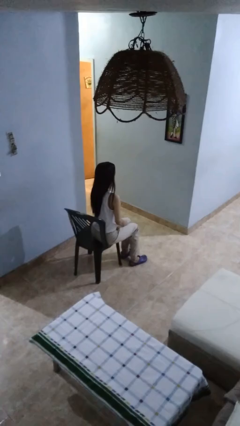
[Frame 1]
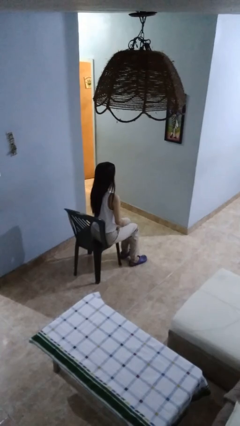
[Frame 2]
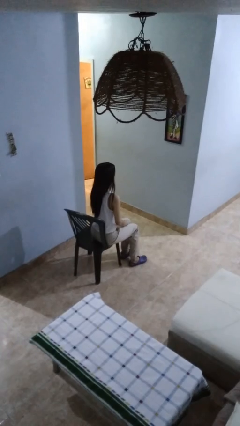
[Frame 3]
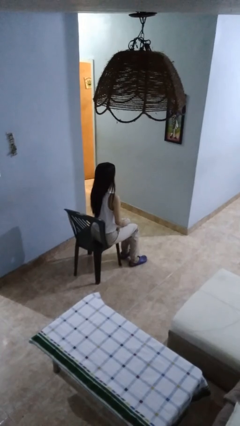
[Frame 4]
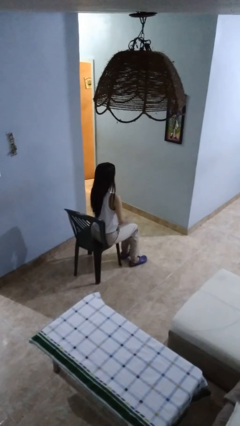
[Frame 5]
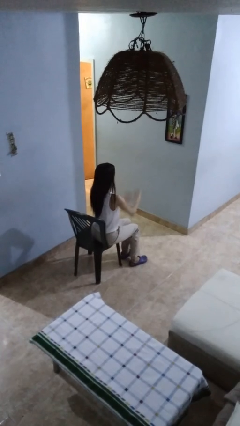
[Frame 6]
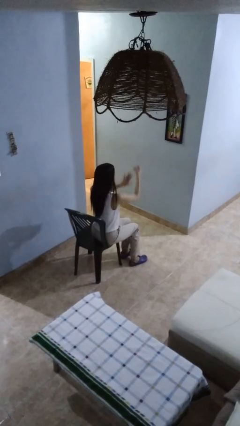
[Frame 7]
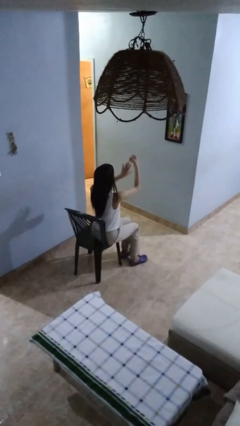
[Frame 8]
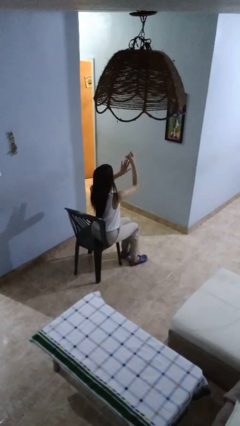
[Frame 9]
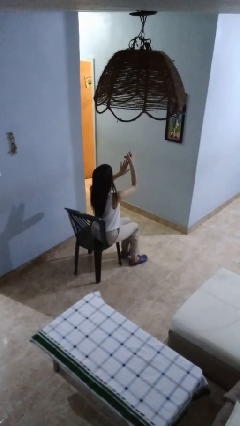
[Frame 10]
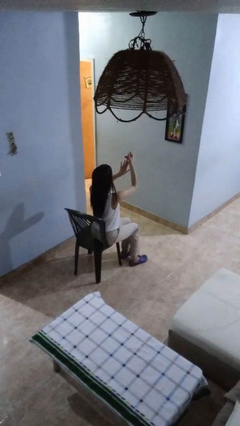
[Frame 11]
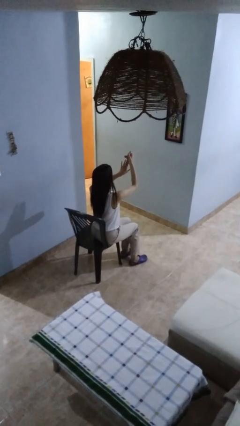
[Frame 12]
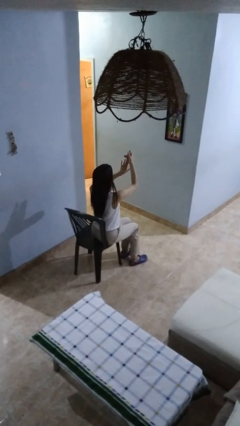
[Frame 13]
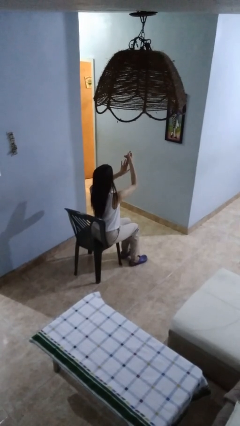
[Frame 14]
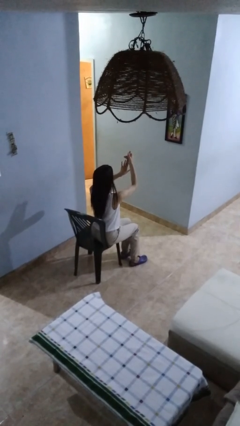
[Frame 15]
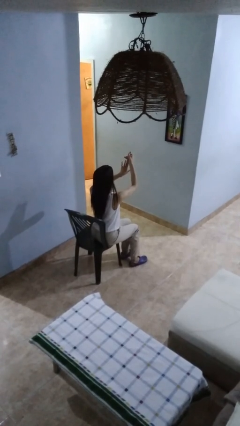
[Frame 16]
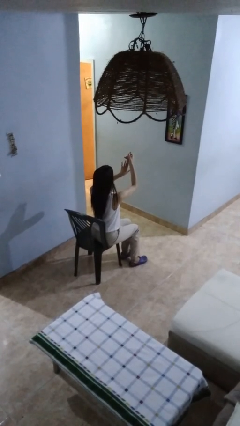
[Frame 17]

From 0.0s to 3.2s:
person clips fingernails

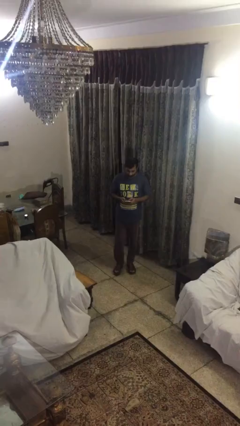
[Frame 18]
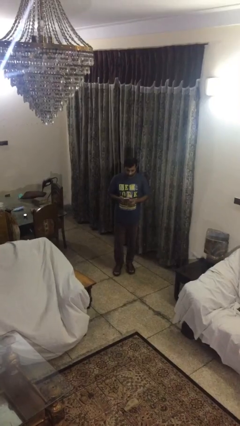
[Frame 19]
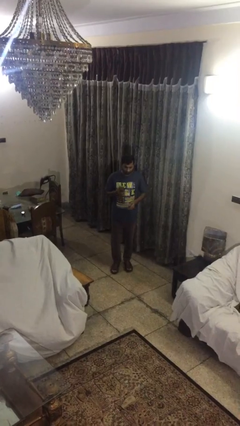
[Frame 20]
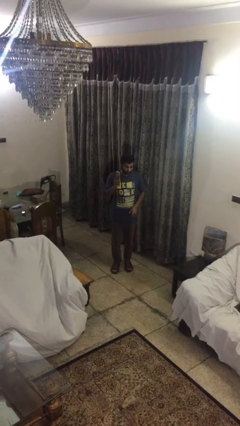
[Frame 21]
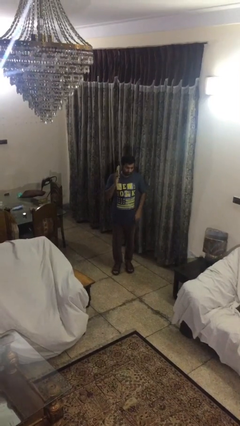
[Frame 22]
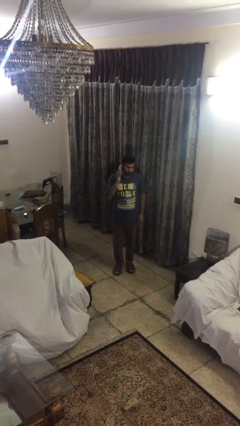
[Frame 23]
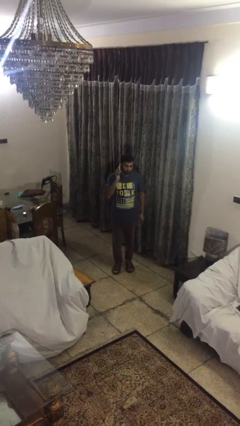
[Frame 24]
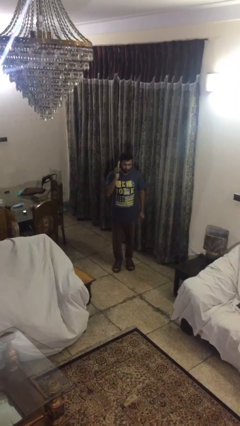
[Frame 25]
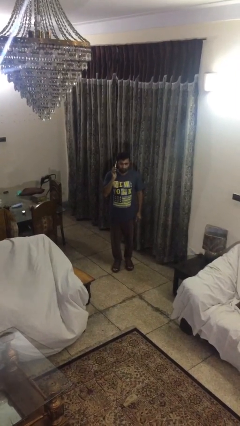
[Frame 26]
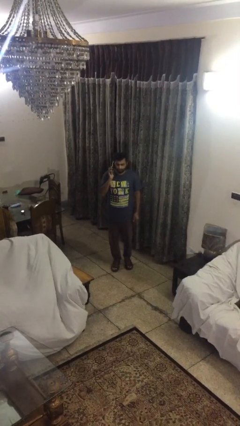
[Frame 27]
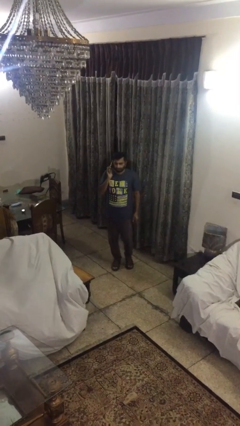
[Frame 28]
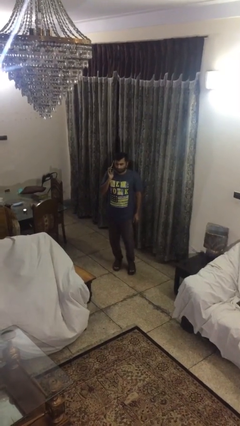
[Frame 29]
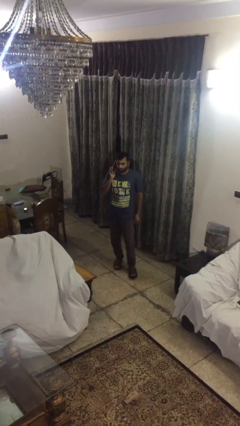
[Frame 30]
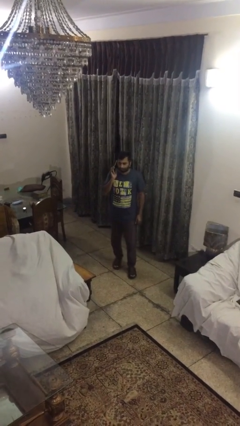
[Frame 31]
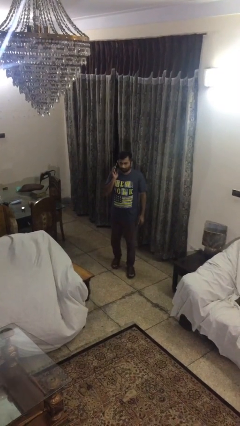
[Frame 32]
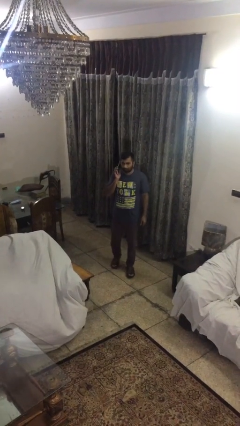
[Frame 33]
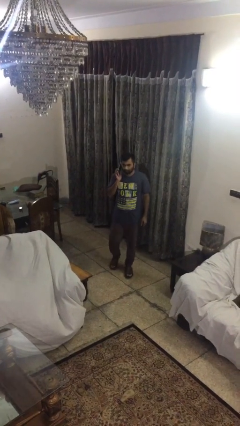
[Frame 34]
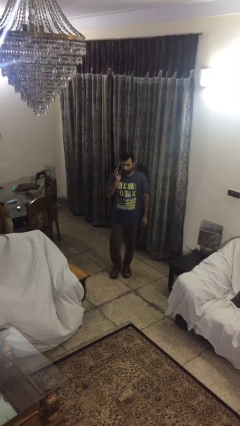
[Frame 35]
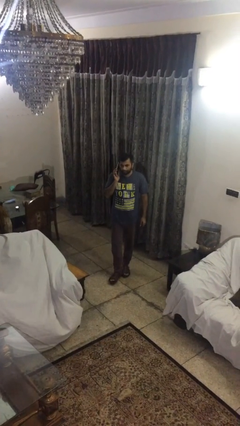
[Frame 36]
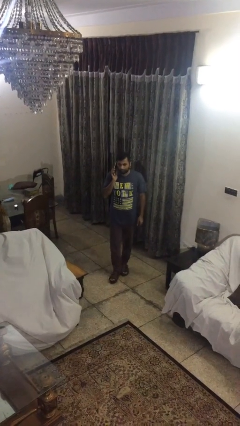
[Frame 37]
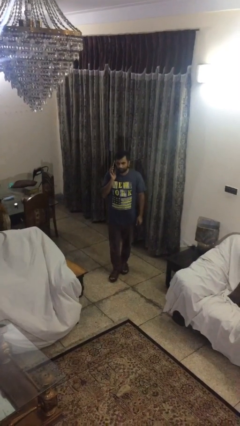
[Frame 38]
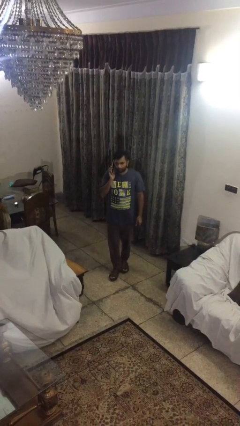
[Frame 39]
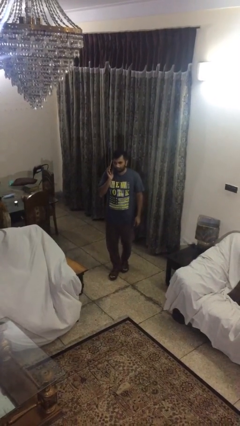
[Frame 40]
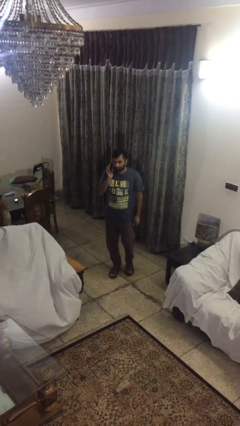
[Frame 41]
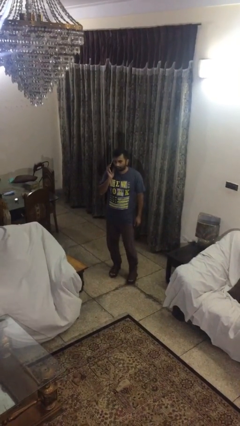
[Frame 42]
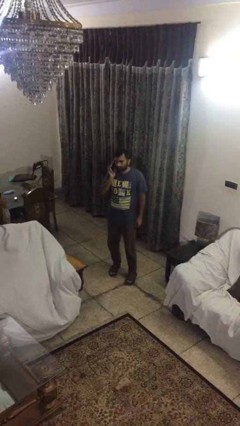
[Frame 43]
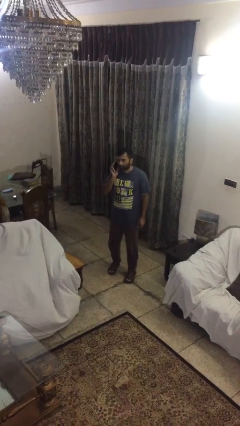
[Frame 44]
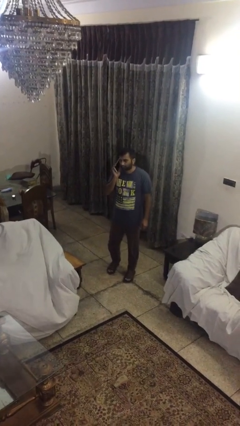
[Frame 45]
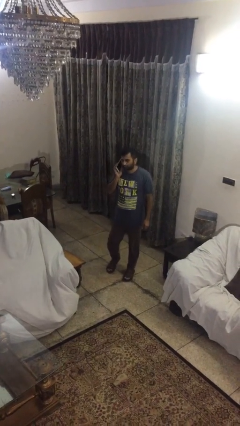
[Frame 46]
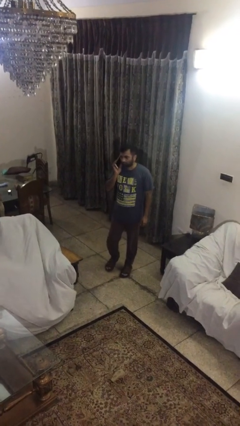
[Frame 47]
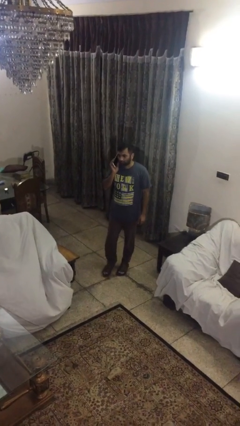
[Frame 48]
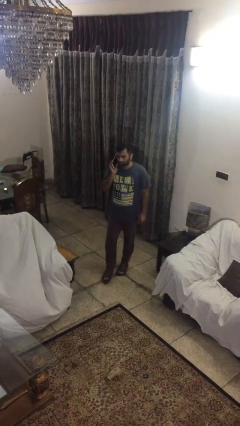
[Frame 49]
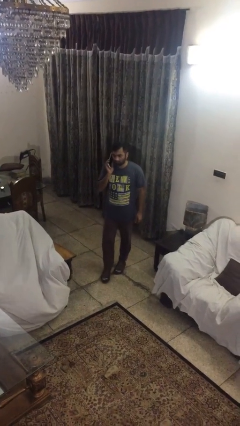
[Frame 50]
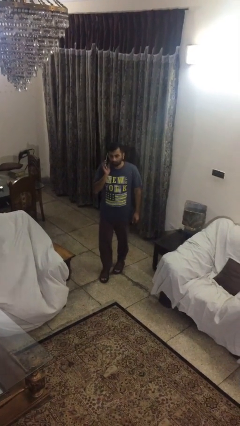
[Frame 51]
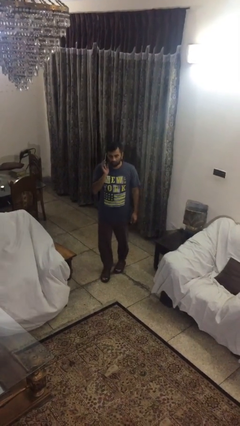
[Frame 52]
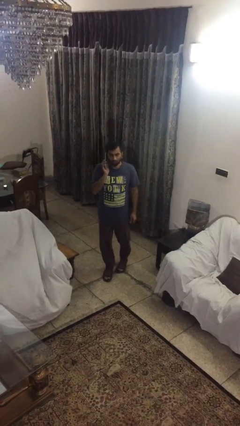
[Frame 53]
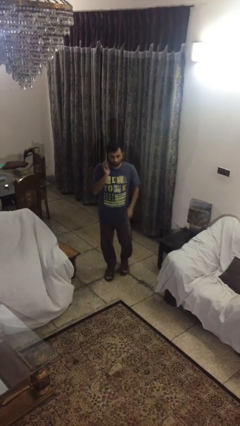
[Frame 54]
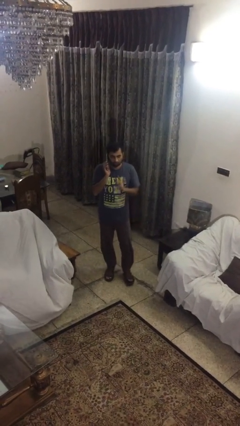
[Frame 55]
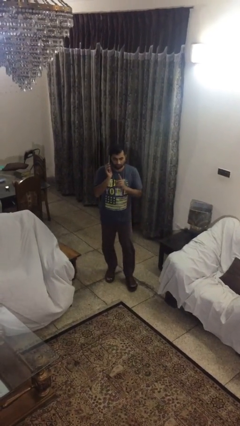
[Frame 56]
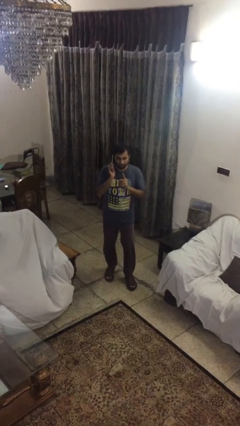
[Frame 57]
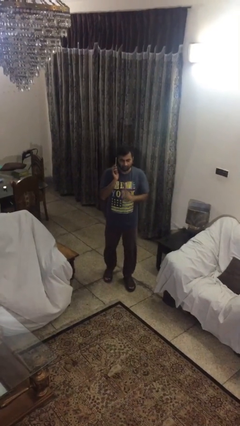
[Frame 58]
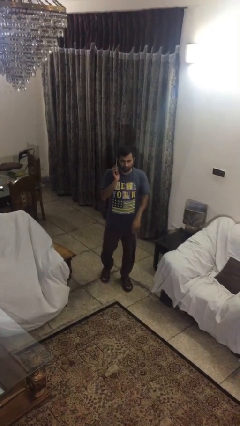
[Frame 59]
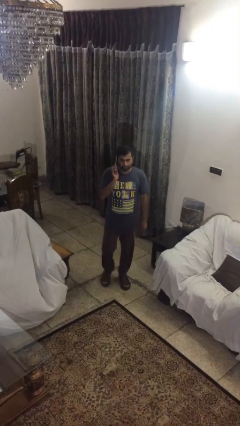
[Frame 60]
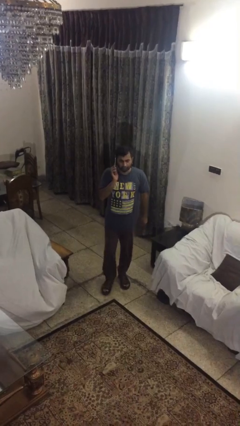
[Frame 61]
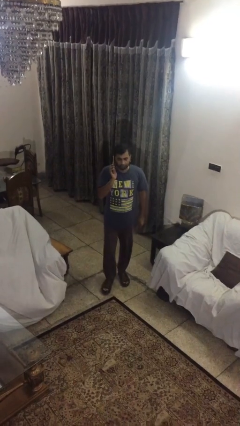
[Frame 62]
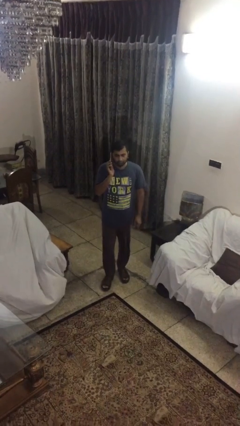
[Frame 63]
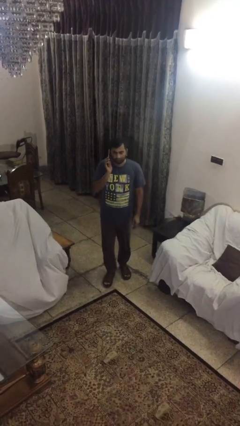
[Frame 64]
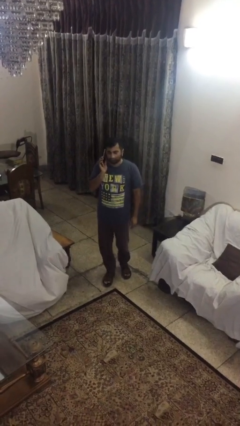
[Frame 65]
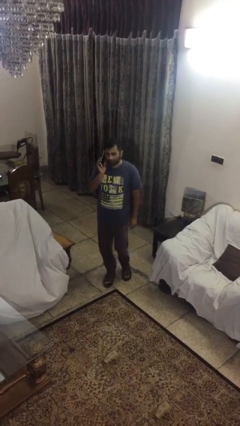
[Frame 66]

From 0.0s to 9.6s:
person talks on phone

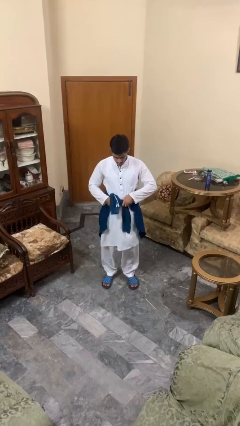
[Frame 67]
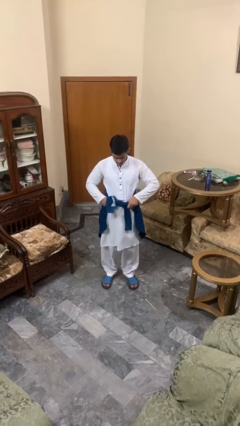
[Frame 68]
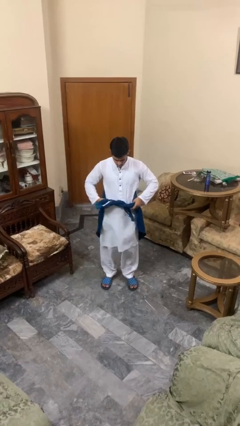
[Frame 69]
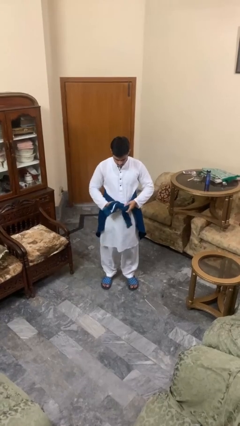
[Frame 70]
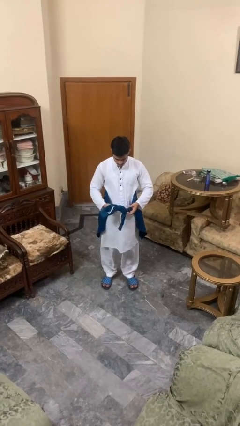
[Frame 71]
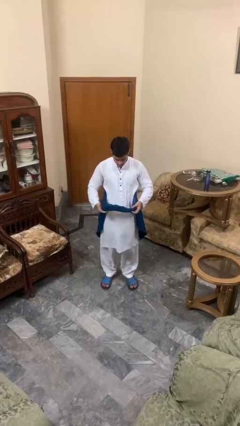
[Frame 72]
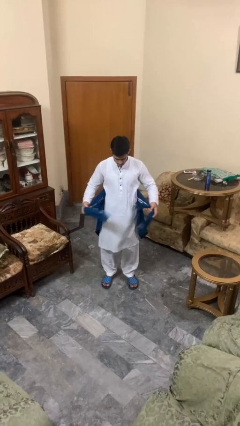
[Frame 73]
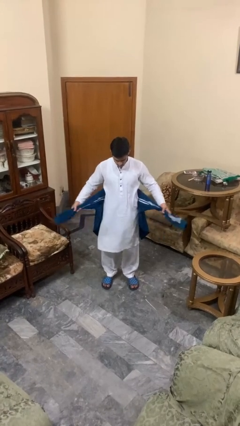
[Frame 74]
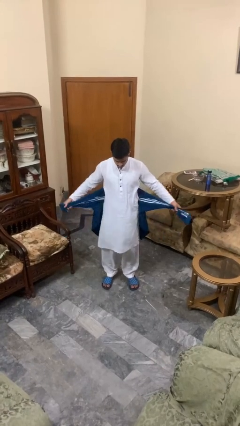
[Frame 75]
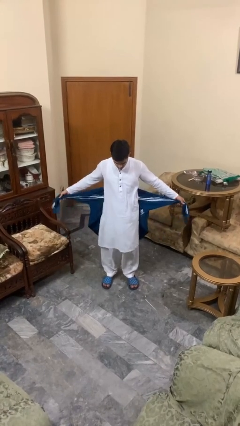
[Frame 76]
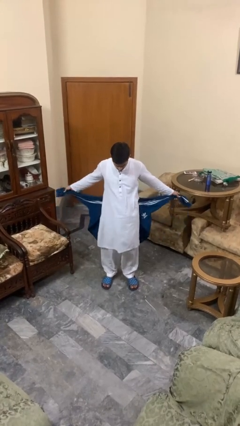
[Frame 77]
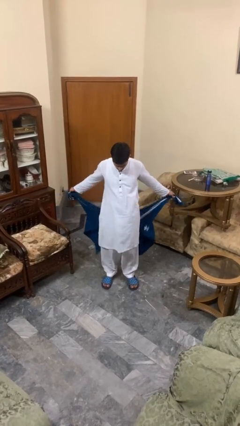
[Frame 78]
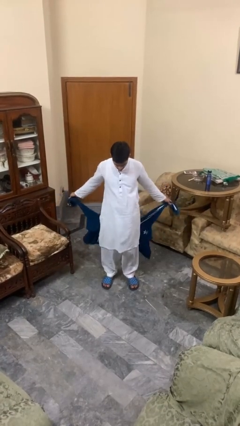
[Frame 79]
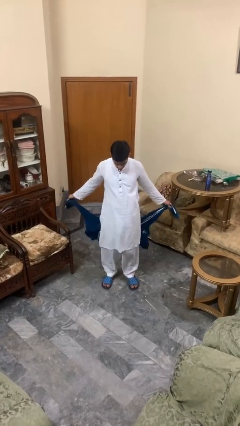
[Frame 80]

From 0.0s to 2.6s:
person unties jacket around waist

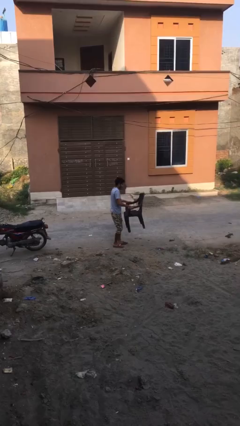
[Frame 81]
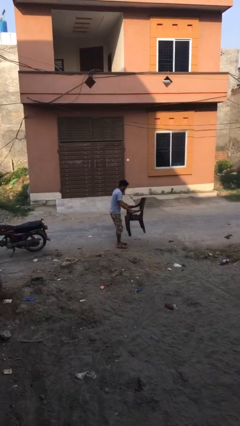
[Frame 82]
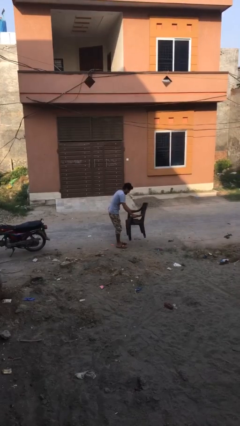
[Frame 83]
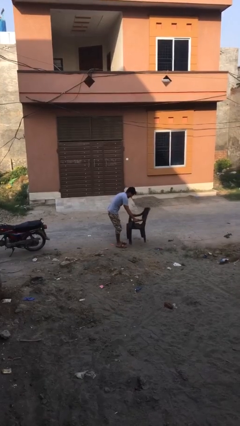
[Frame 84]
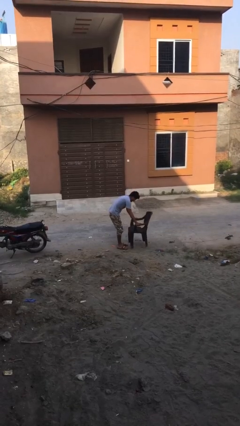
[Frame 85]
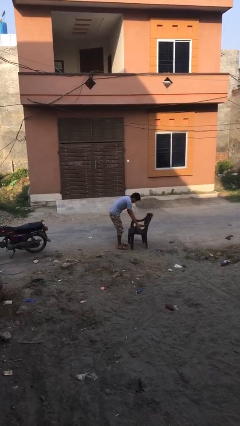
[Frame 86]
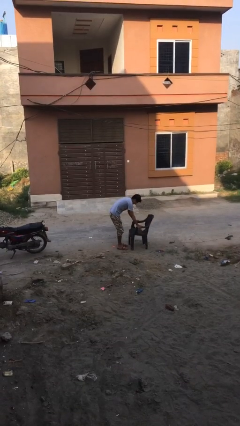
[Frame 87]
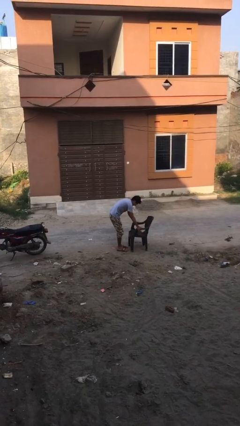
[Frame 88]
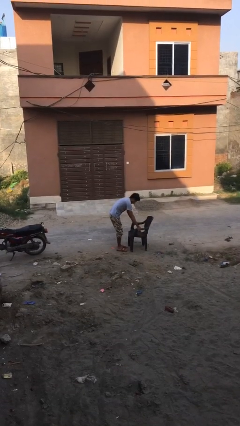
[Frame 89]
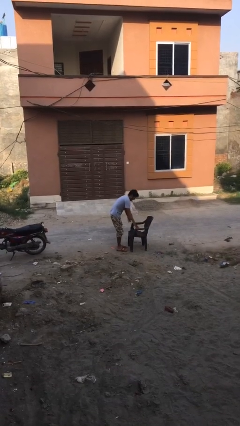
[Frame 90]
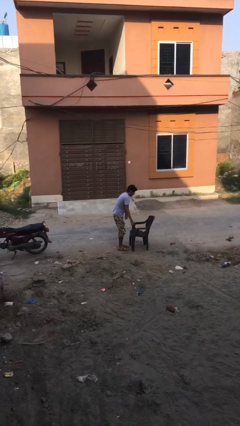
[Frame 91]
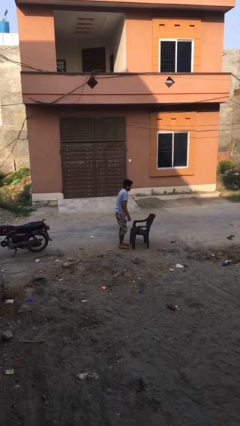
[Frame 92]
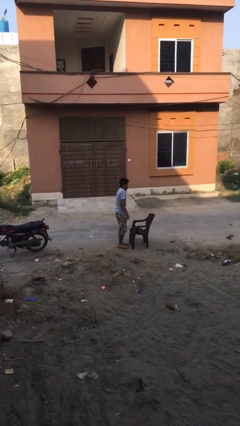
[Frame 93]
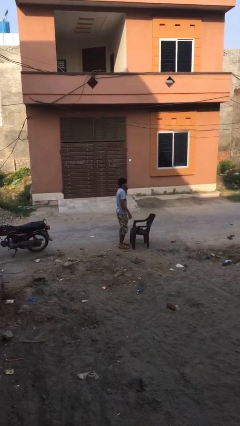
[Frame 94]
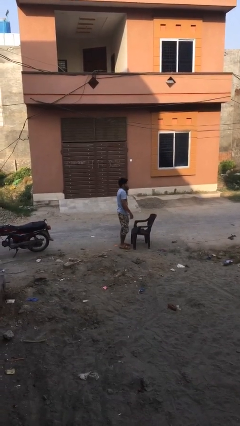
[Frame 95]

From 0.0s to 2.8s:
person puts down object on floor
